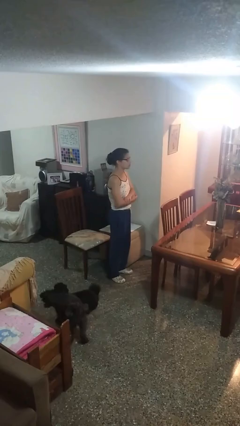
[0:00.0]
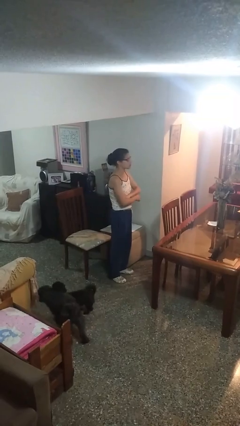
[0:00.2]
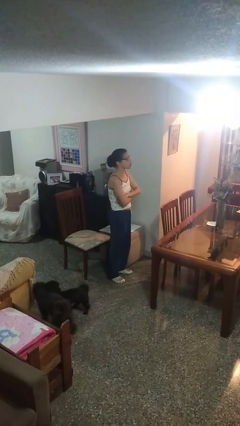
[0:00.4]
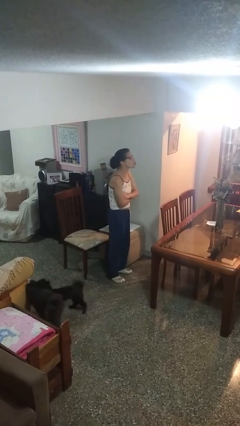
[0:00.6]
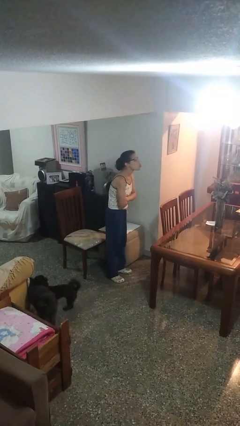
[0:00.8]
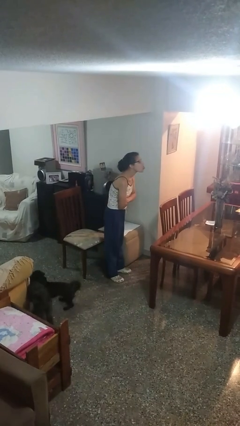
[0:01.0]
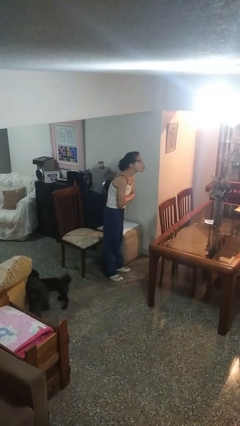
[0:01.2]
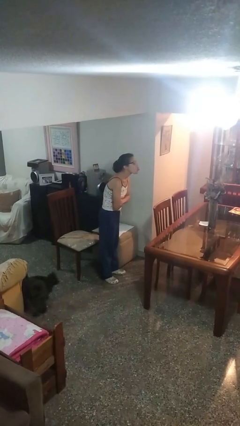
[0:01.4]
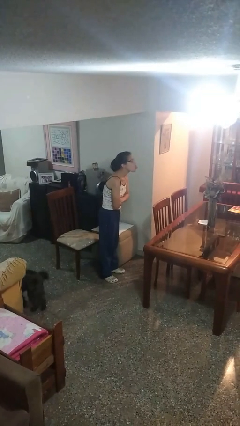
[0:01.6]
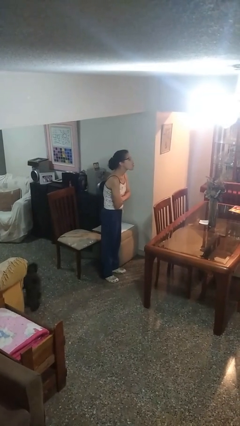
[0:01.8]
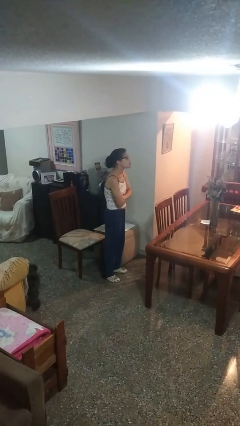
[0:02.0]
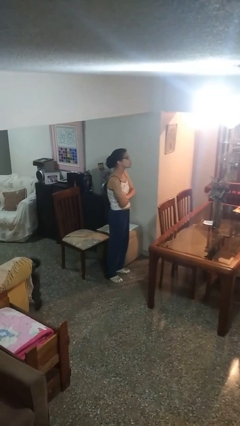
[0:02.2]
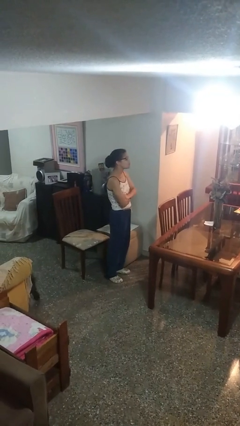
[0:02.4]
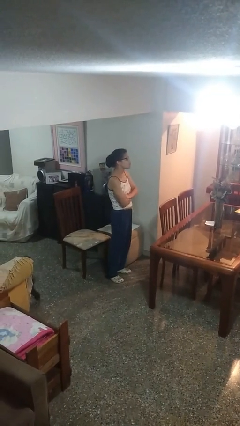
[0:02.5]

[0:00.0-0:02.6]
person sticks out tongue

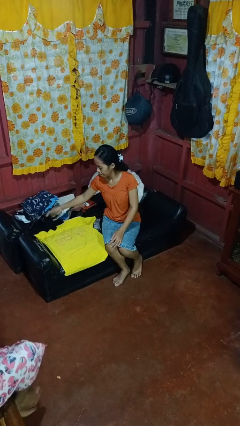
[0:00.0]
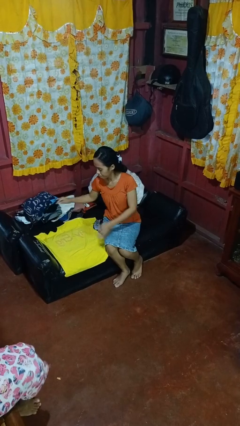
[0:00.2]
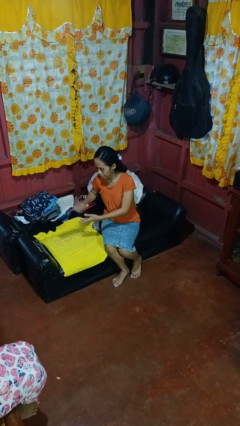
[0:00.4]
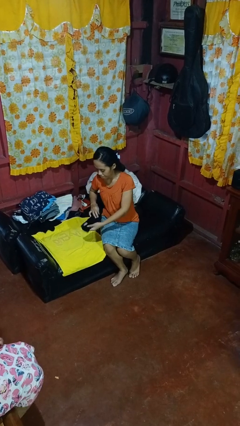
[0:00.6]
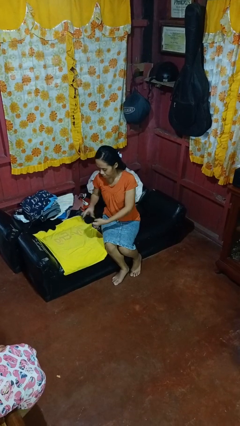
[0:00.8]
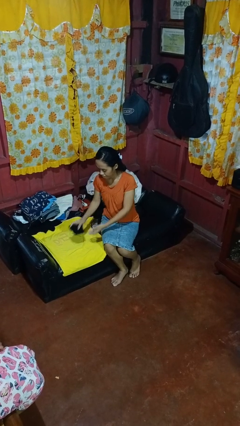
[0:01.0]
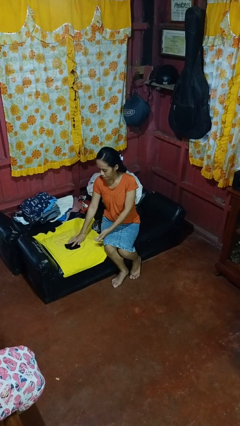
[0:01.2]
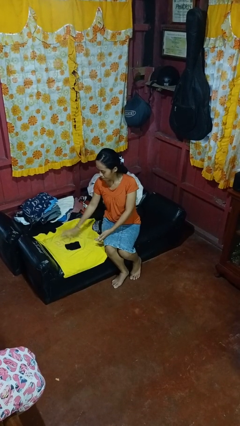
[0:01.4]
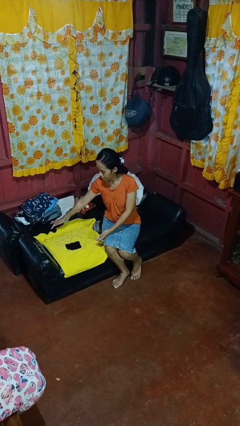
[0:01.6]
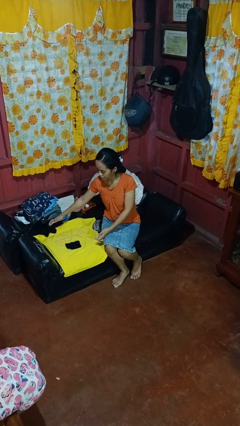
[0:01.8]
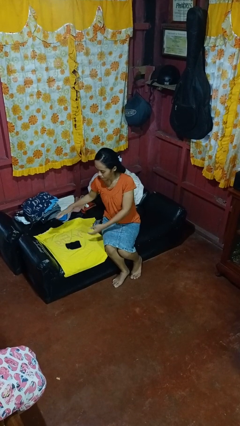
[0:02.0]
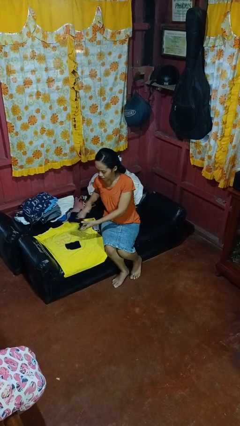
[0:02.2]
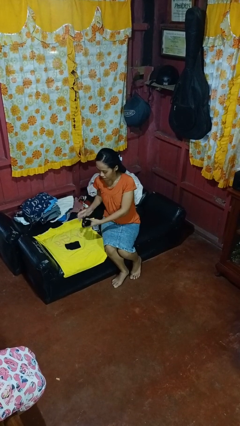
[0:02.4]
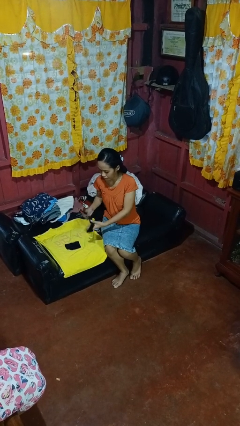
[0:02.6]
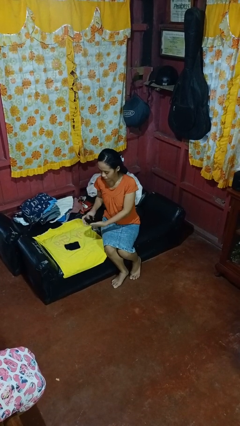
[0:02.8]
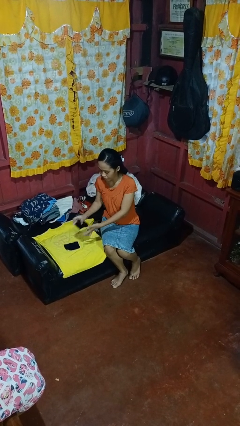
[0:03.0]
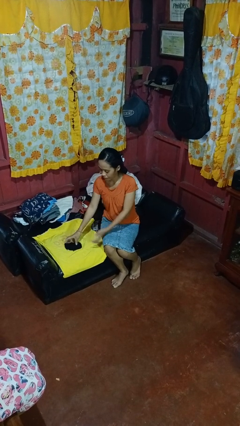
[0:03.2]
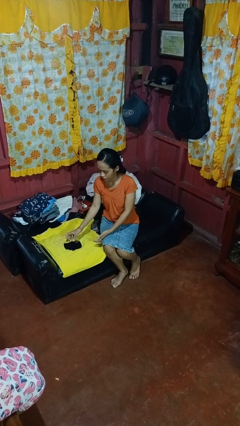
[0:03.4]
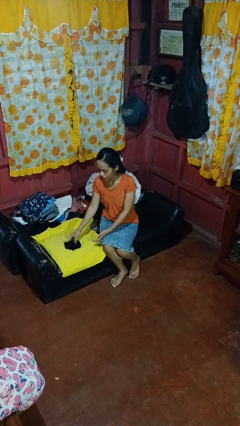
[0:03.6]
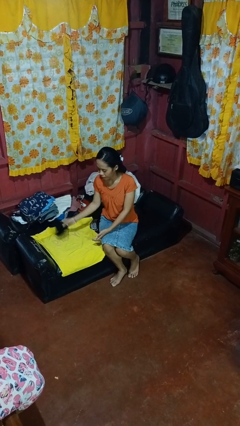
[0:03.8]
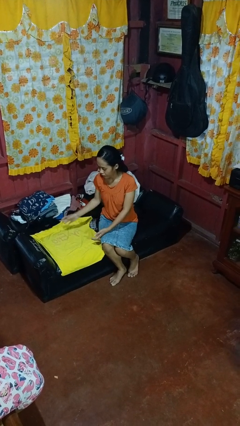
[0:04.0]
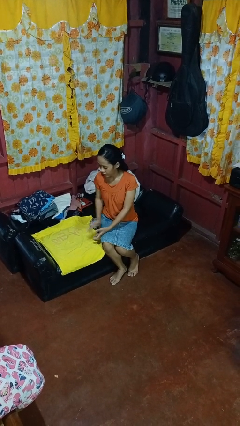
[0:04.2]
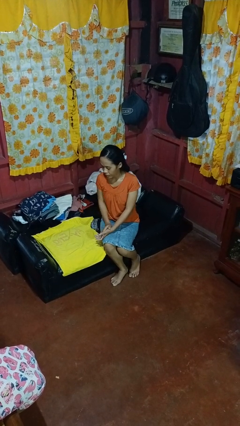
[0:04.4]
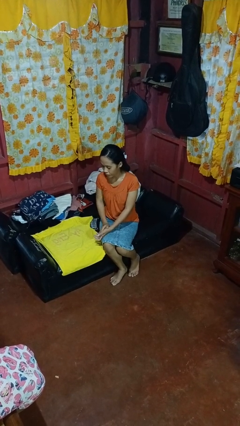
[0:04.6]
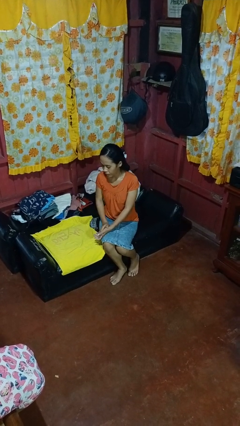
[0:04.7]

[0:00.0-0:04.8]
person folds socks

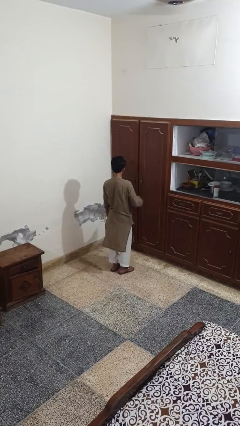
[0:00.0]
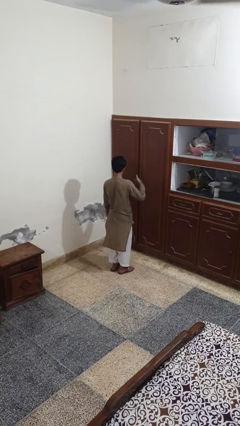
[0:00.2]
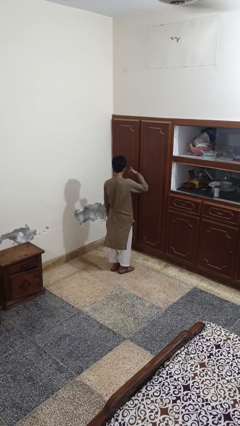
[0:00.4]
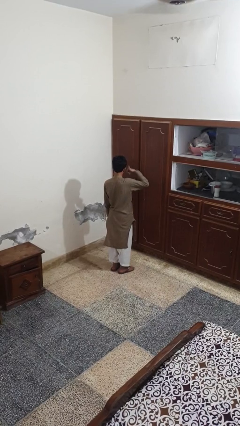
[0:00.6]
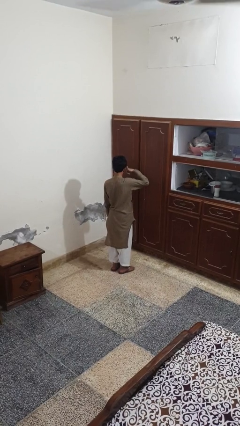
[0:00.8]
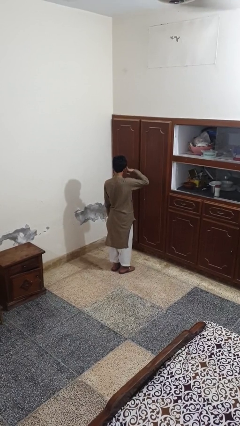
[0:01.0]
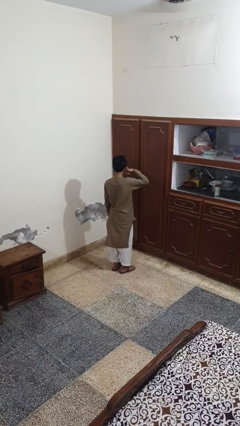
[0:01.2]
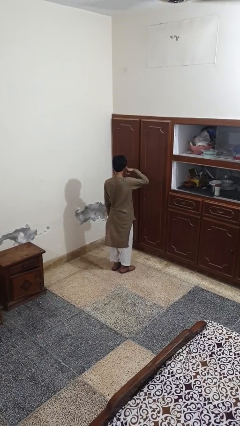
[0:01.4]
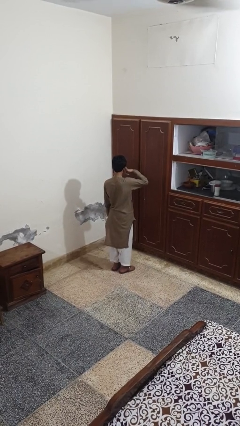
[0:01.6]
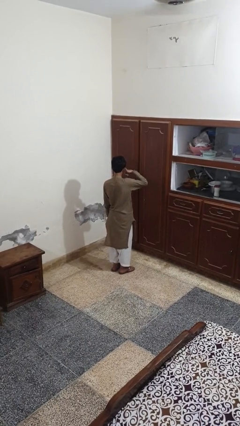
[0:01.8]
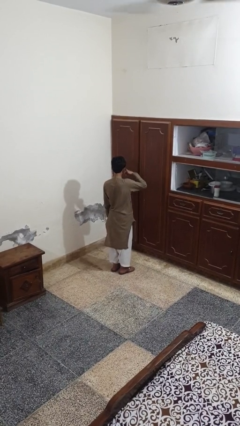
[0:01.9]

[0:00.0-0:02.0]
person gestures call me

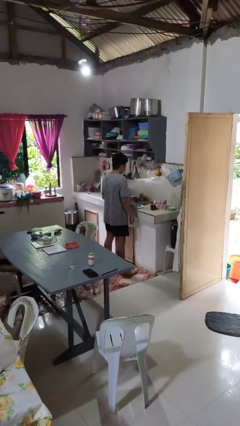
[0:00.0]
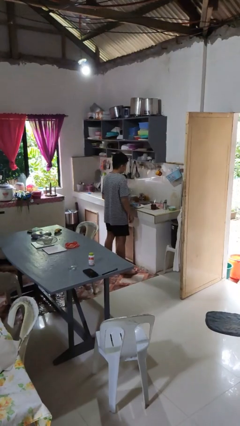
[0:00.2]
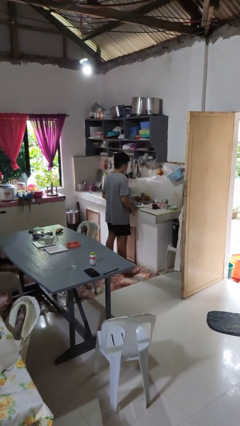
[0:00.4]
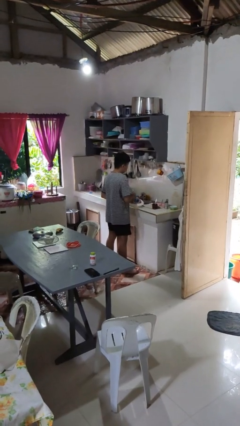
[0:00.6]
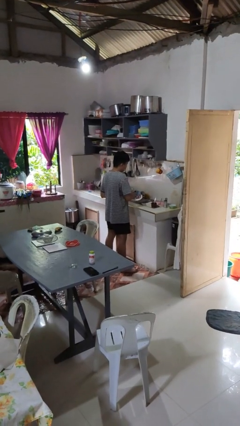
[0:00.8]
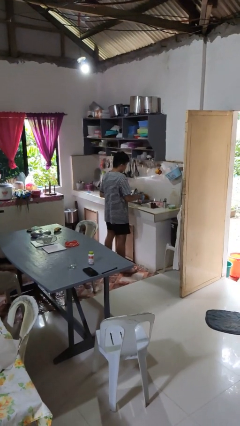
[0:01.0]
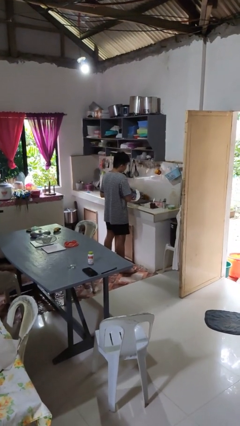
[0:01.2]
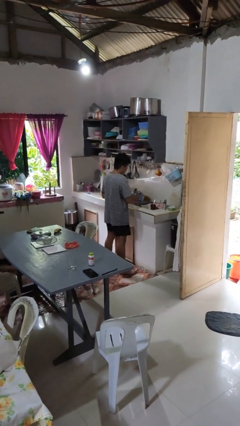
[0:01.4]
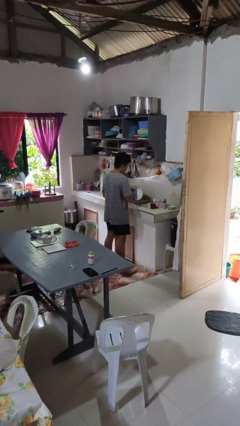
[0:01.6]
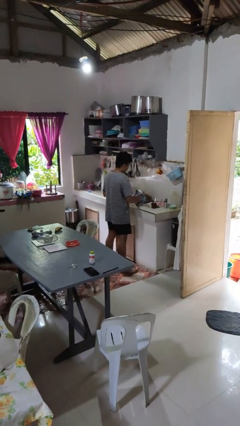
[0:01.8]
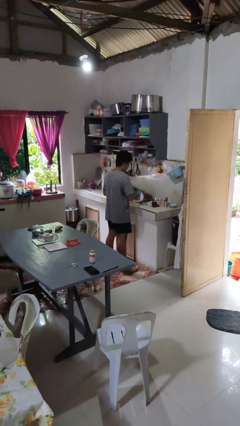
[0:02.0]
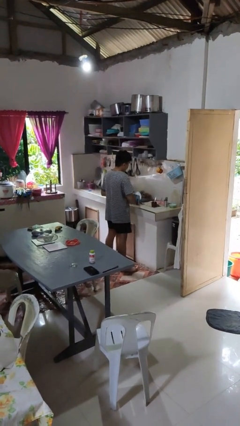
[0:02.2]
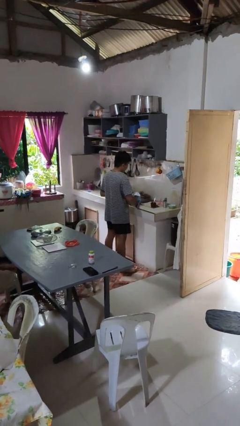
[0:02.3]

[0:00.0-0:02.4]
person dries dish

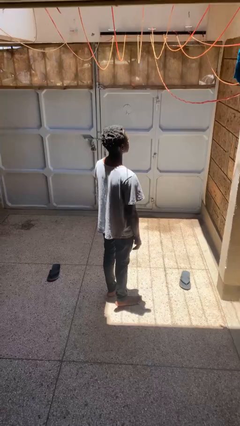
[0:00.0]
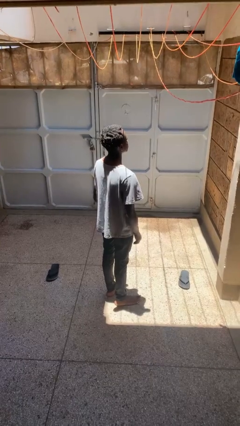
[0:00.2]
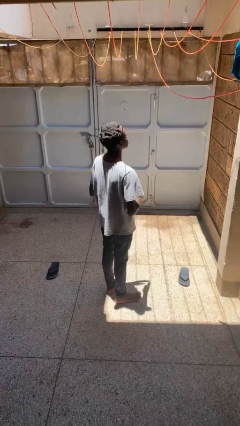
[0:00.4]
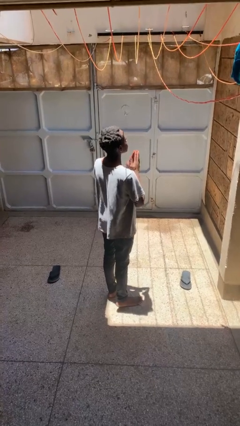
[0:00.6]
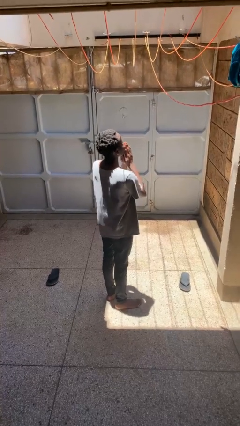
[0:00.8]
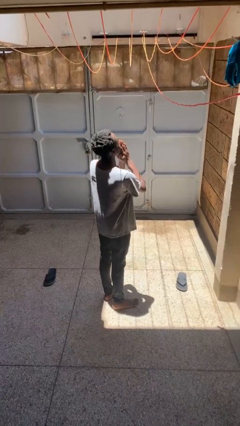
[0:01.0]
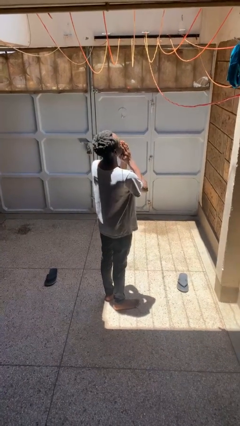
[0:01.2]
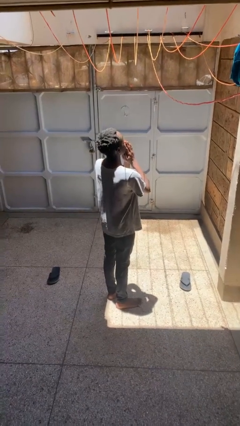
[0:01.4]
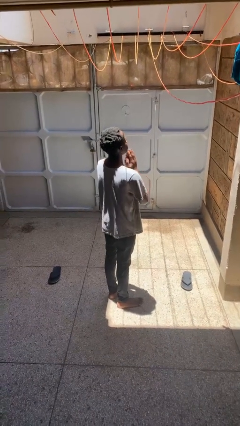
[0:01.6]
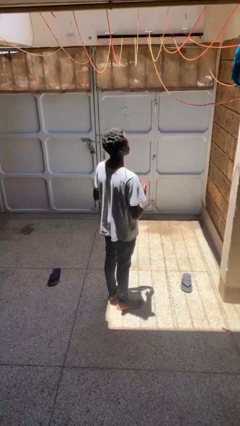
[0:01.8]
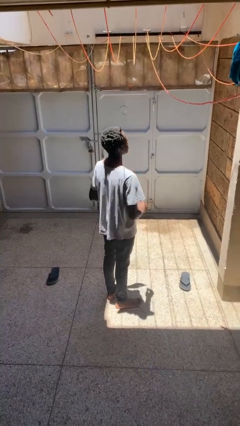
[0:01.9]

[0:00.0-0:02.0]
person prays

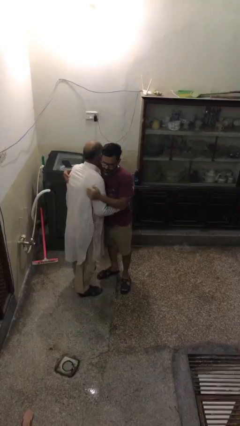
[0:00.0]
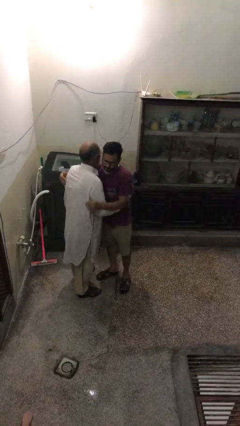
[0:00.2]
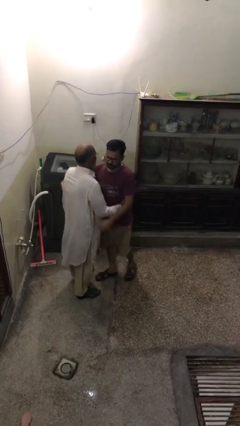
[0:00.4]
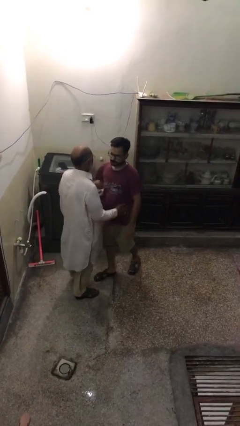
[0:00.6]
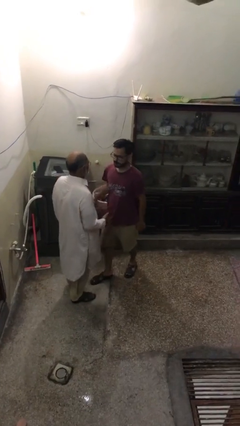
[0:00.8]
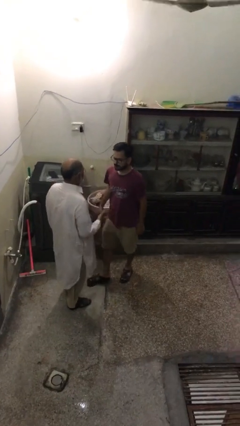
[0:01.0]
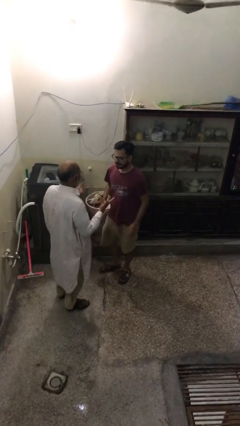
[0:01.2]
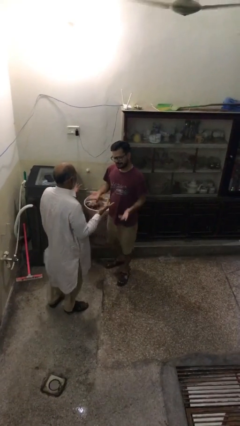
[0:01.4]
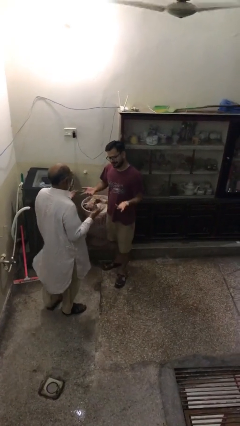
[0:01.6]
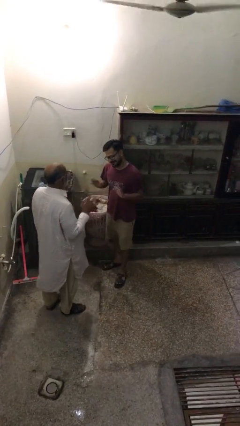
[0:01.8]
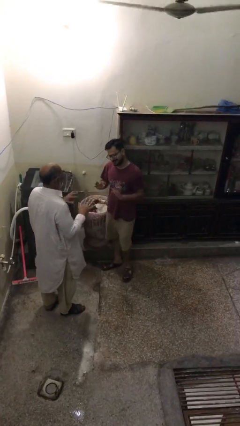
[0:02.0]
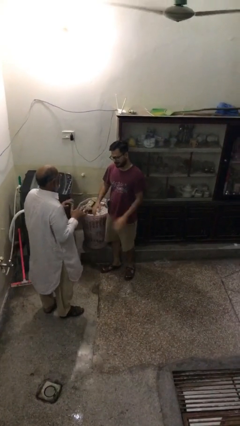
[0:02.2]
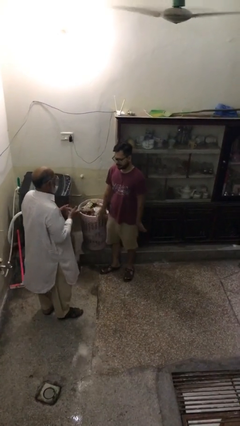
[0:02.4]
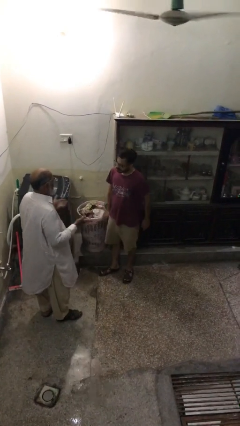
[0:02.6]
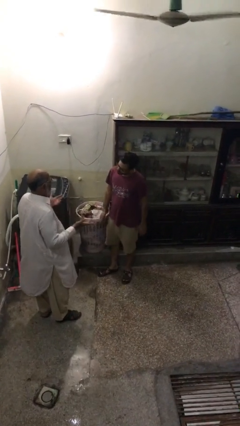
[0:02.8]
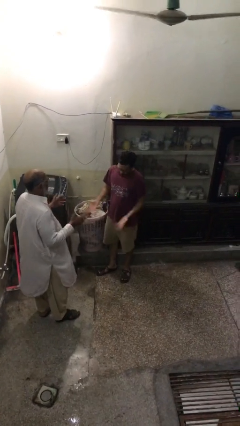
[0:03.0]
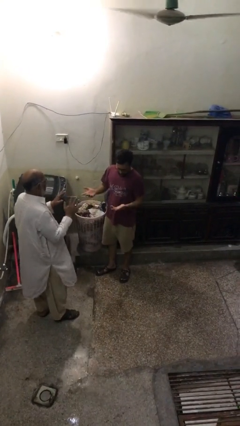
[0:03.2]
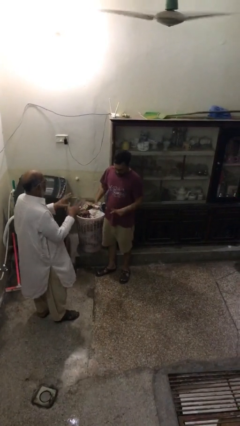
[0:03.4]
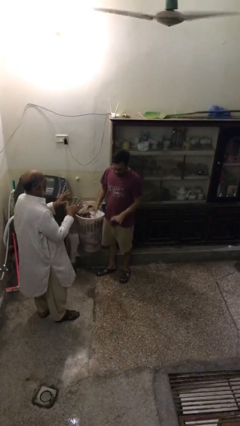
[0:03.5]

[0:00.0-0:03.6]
person talks to person
